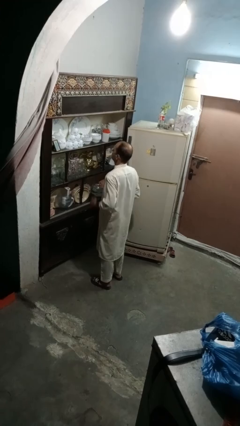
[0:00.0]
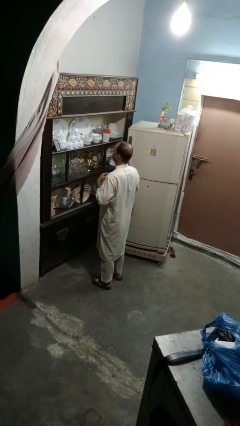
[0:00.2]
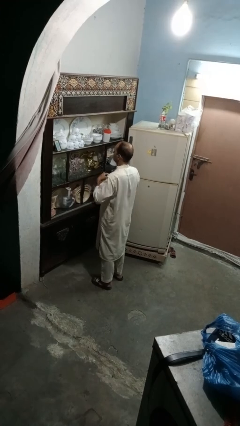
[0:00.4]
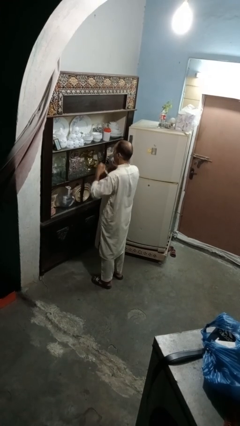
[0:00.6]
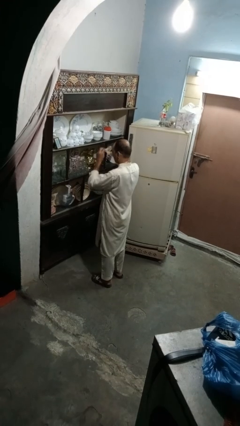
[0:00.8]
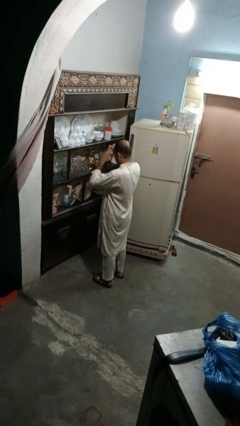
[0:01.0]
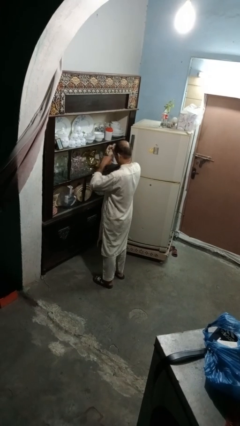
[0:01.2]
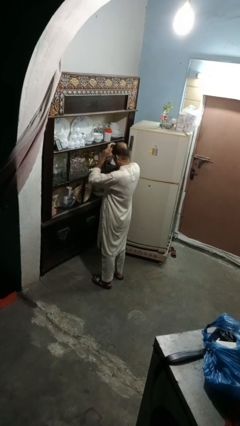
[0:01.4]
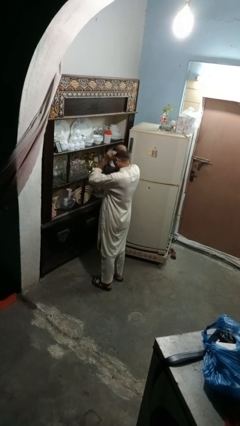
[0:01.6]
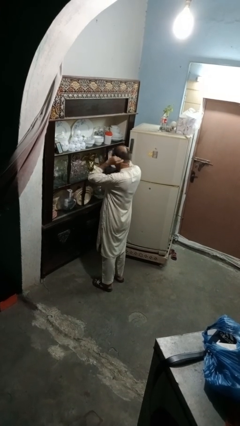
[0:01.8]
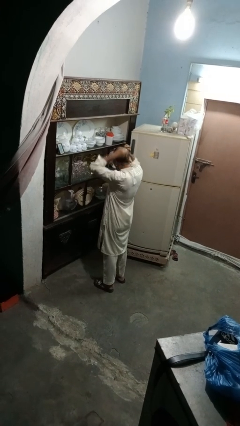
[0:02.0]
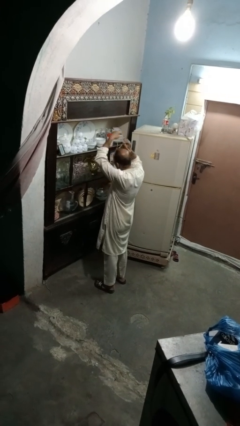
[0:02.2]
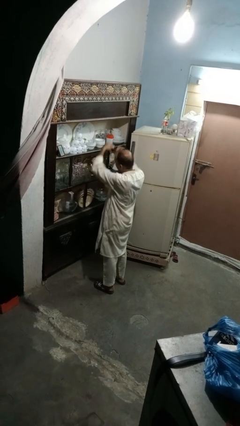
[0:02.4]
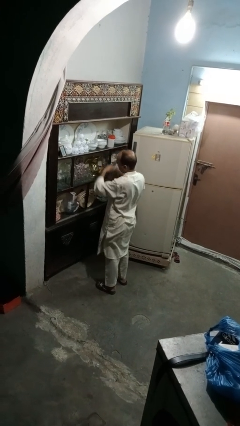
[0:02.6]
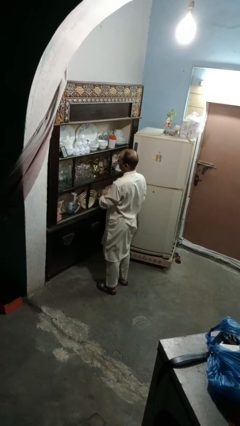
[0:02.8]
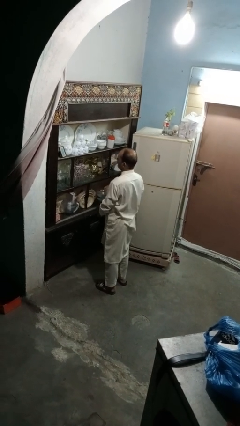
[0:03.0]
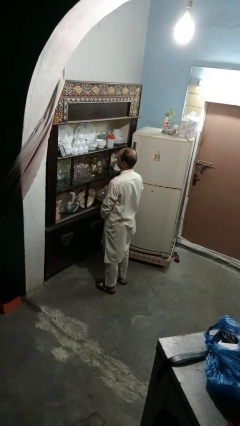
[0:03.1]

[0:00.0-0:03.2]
person takes off necklace

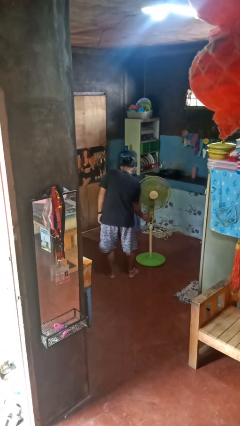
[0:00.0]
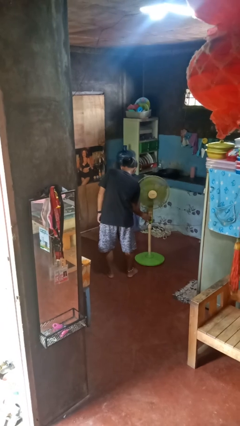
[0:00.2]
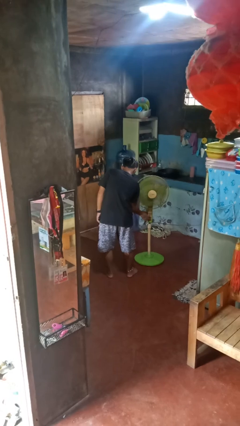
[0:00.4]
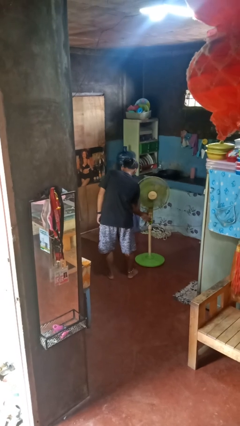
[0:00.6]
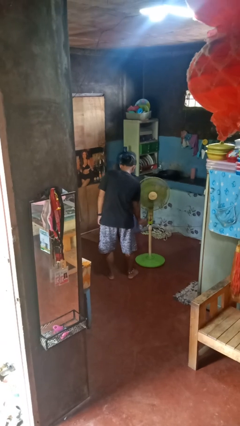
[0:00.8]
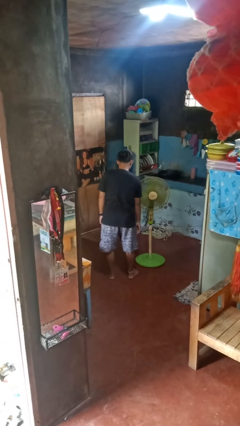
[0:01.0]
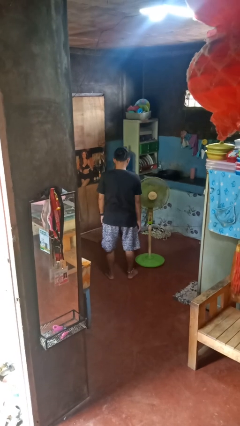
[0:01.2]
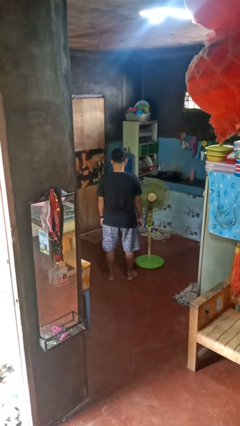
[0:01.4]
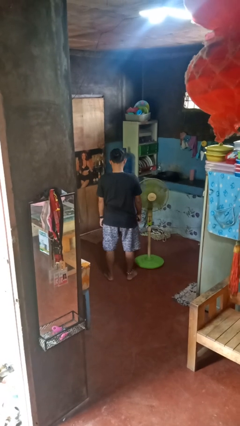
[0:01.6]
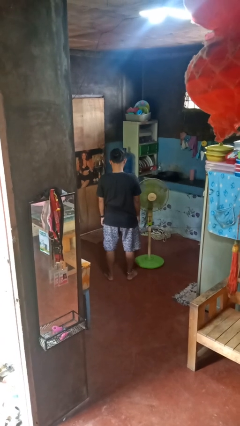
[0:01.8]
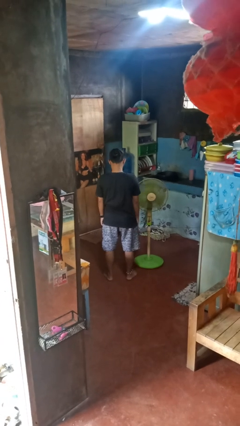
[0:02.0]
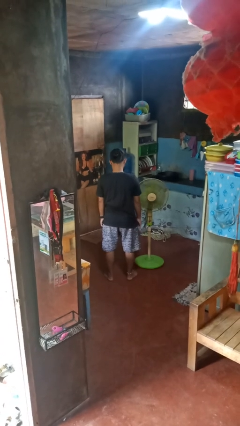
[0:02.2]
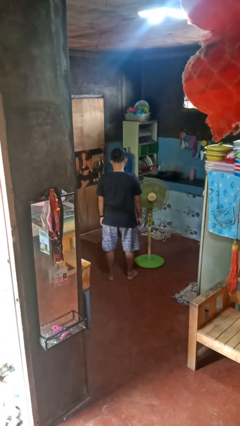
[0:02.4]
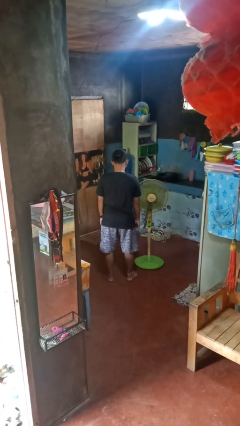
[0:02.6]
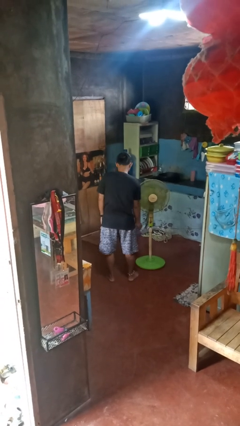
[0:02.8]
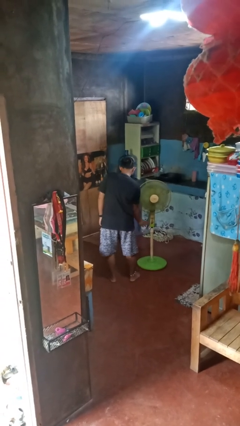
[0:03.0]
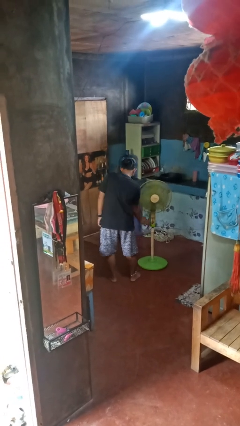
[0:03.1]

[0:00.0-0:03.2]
person turns on fan

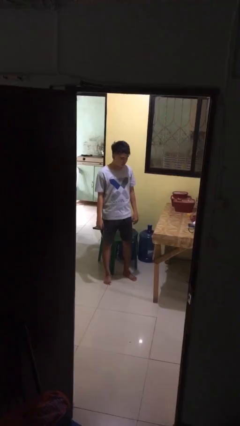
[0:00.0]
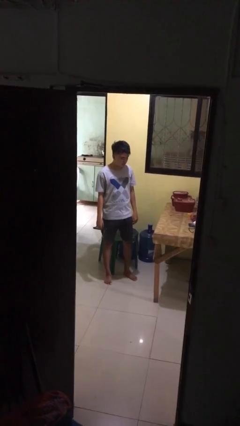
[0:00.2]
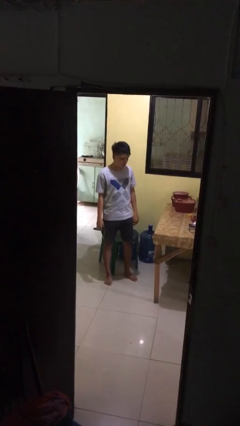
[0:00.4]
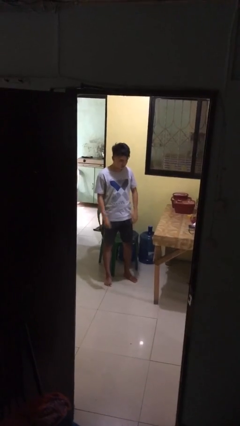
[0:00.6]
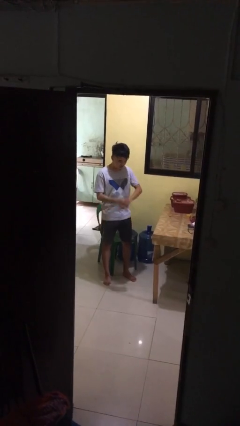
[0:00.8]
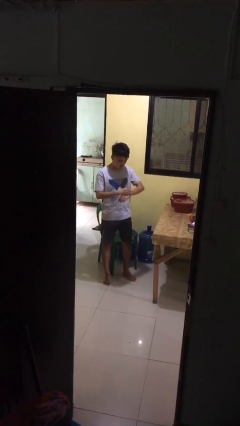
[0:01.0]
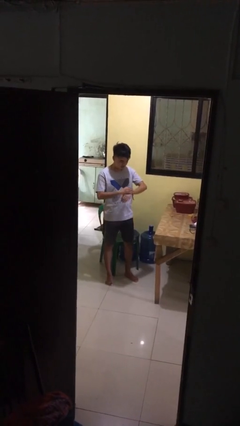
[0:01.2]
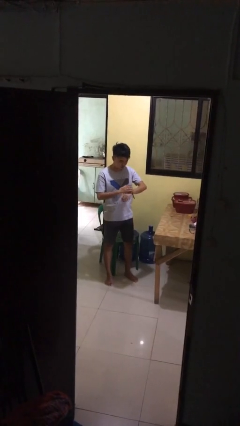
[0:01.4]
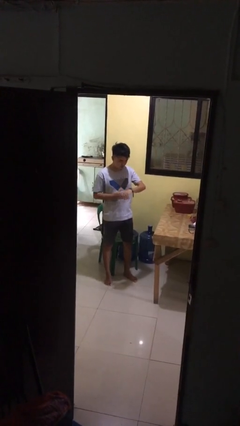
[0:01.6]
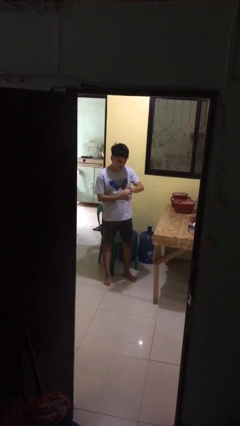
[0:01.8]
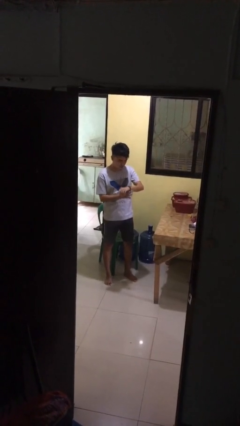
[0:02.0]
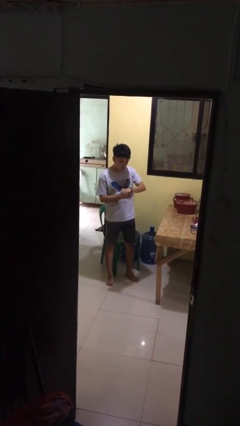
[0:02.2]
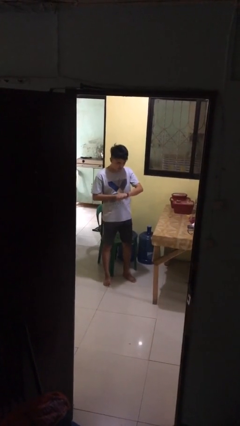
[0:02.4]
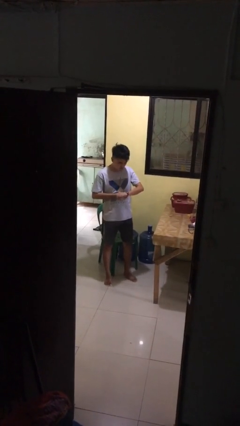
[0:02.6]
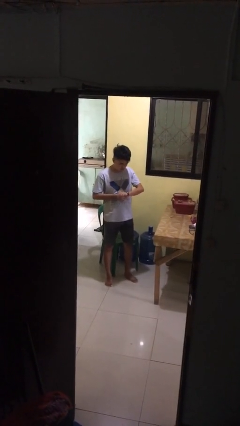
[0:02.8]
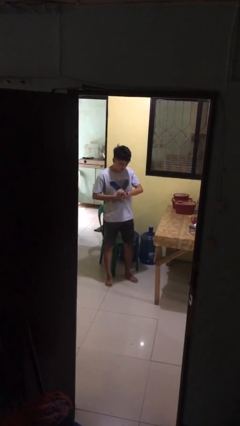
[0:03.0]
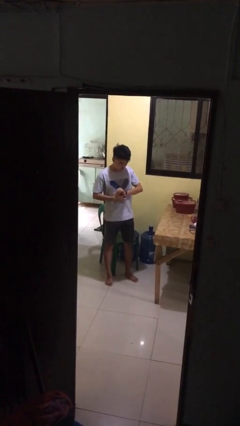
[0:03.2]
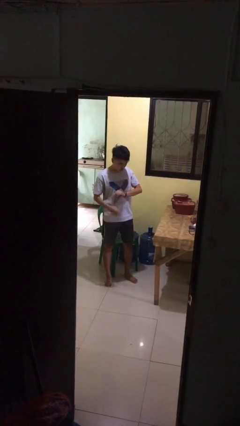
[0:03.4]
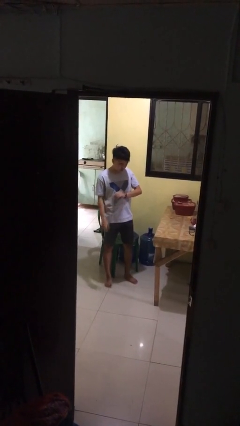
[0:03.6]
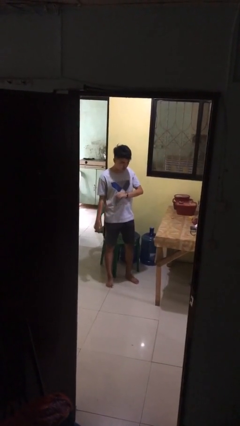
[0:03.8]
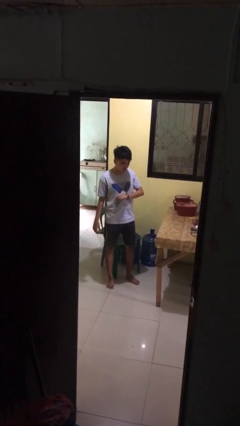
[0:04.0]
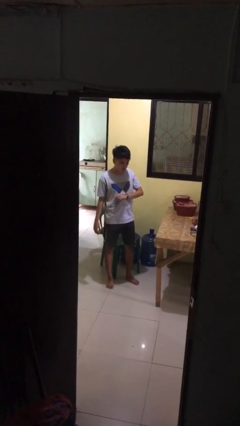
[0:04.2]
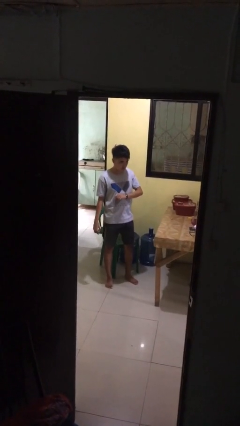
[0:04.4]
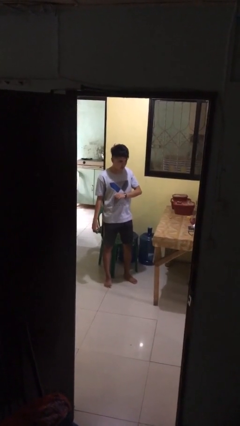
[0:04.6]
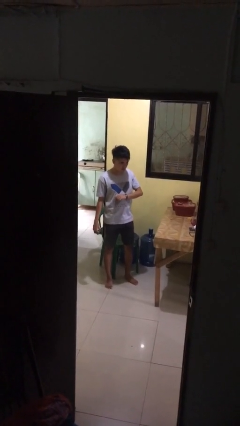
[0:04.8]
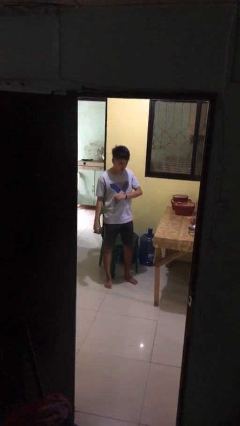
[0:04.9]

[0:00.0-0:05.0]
person puts on wristwatch

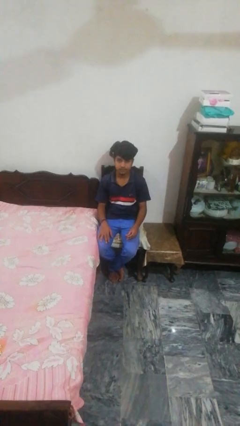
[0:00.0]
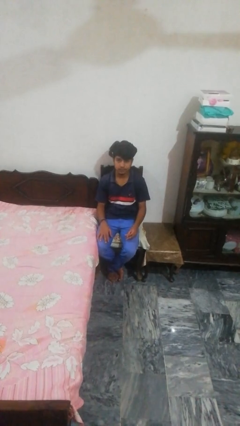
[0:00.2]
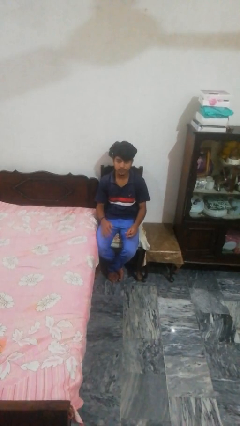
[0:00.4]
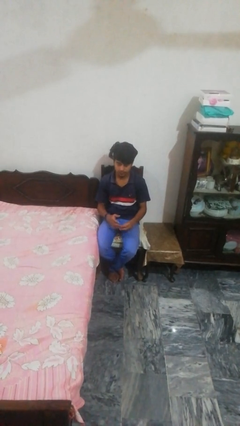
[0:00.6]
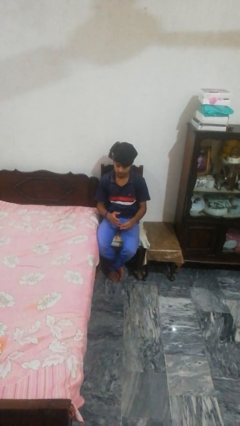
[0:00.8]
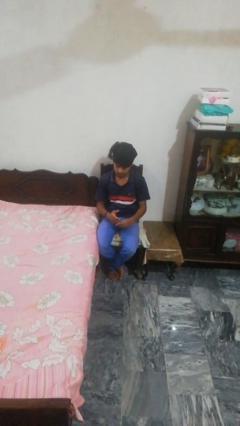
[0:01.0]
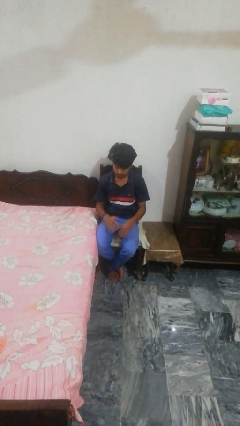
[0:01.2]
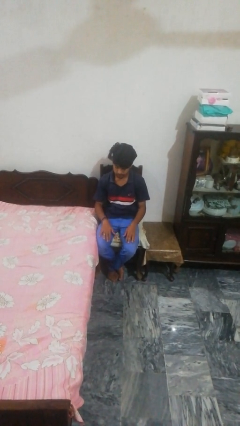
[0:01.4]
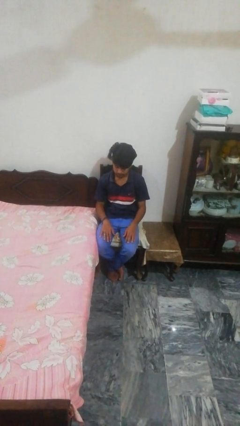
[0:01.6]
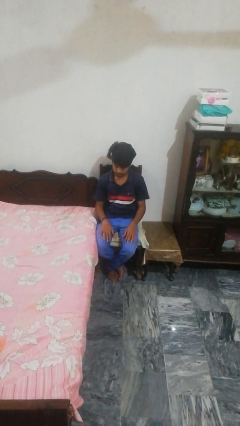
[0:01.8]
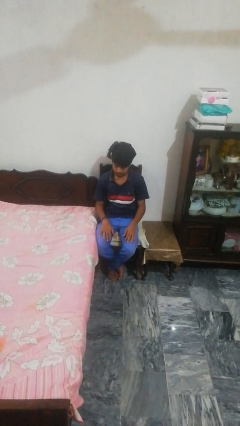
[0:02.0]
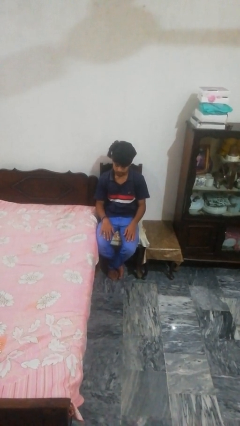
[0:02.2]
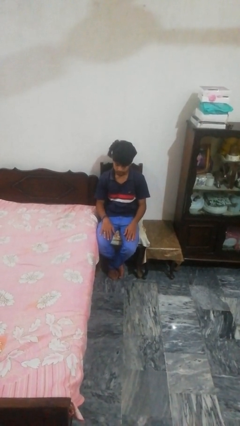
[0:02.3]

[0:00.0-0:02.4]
person puts on ring

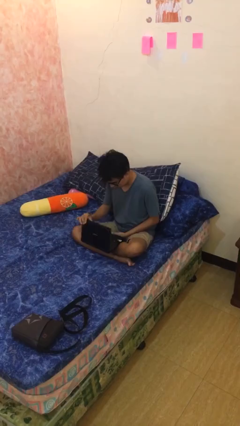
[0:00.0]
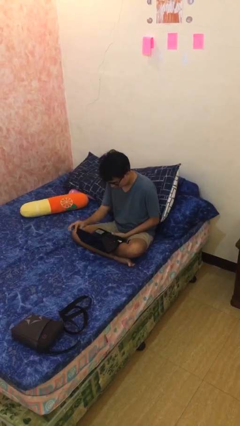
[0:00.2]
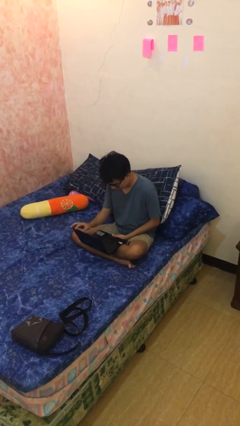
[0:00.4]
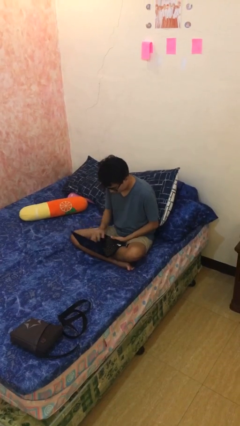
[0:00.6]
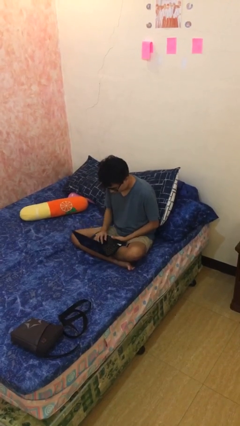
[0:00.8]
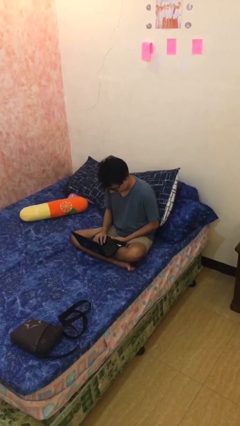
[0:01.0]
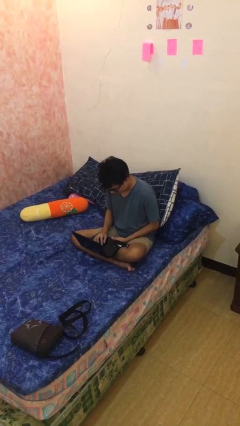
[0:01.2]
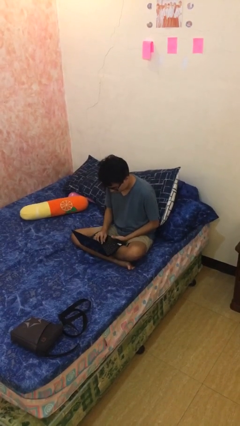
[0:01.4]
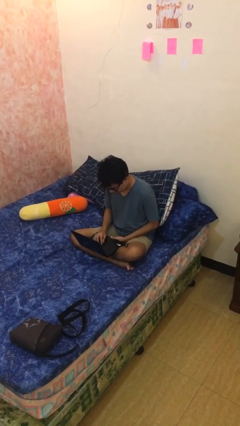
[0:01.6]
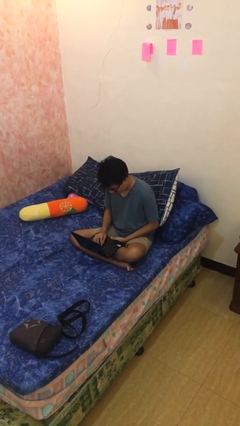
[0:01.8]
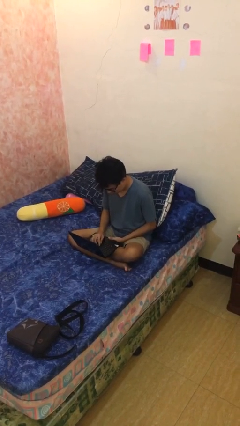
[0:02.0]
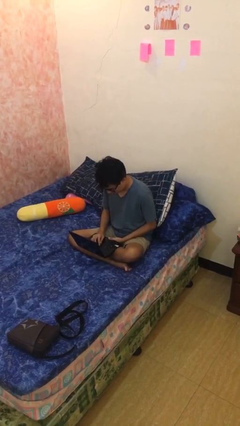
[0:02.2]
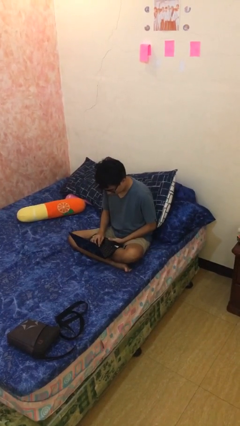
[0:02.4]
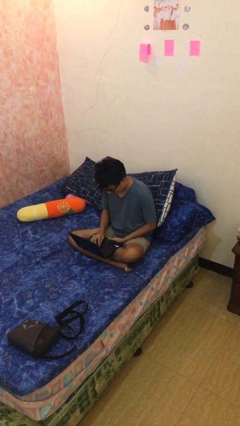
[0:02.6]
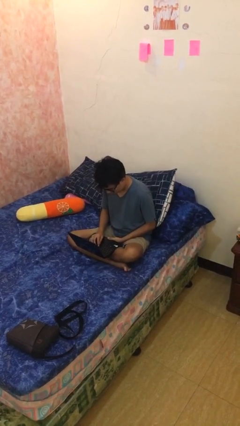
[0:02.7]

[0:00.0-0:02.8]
person interacts with laptop

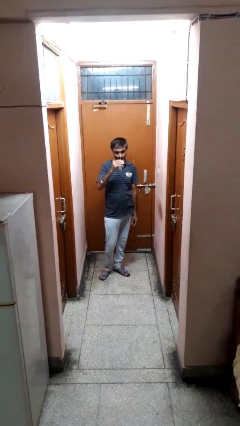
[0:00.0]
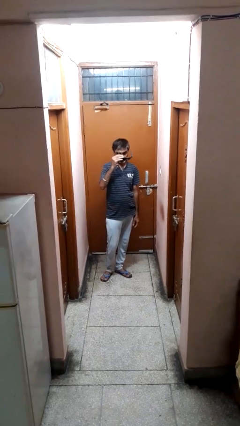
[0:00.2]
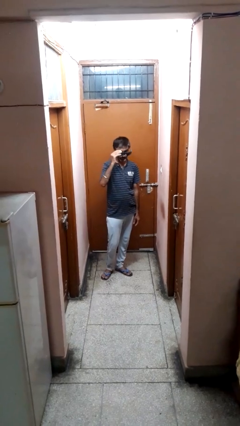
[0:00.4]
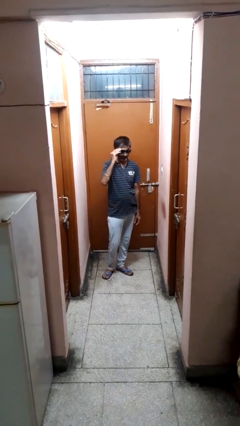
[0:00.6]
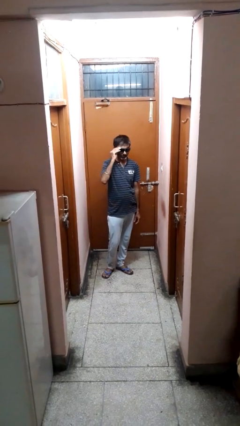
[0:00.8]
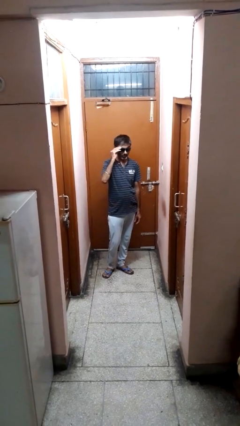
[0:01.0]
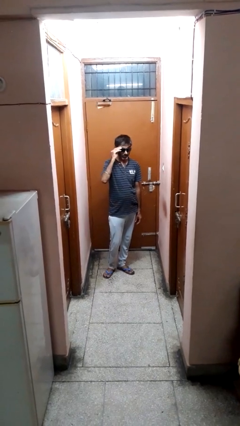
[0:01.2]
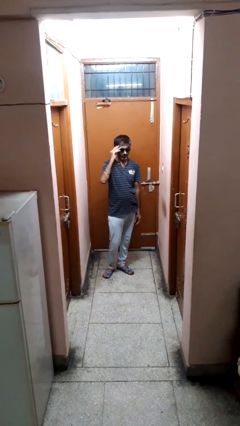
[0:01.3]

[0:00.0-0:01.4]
person puts on sunglasses
